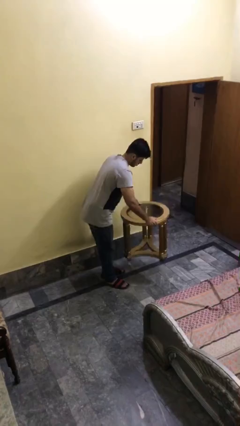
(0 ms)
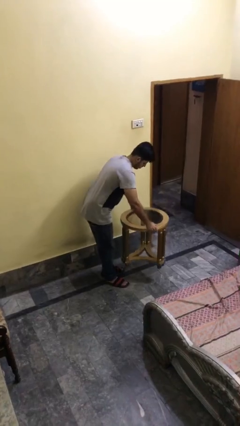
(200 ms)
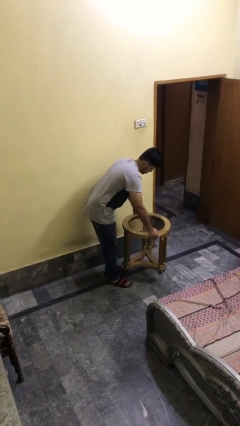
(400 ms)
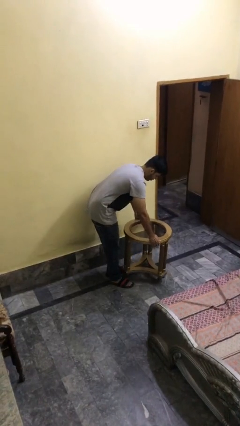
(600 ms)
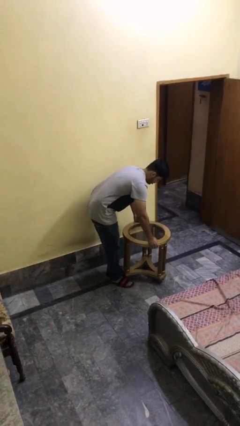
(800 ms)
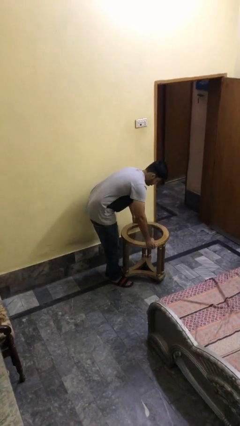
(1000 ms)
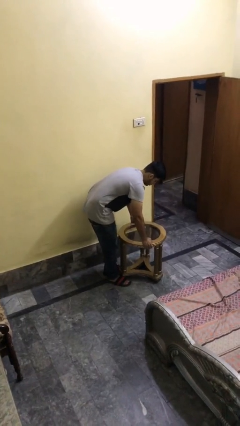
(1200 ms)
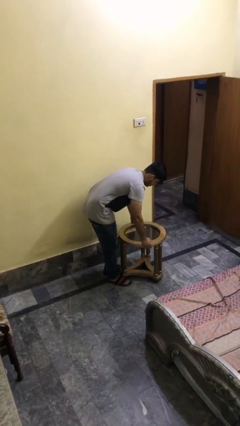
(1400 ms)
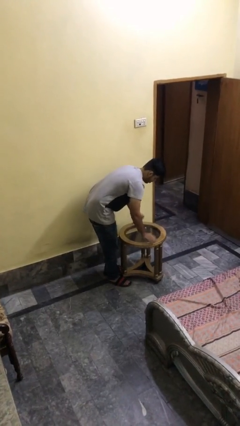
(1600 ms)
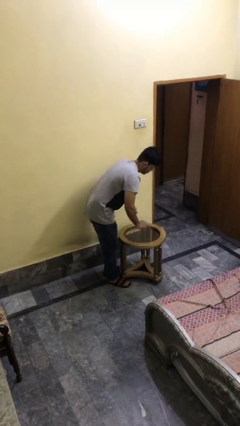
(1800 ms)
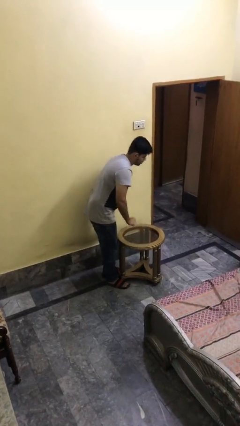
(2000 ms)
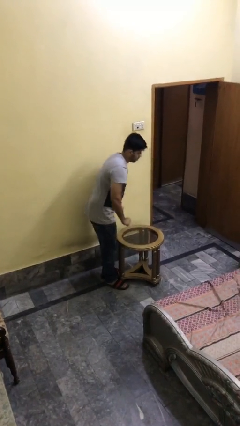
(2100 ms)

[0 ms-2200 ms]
person puts down object on floor

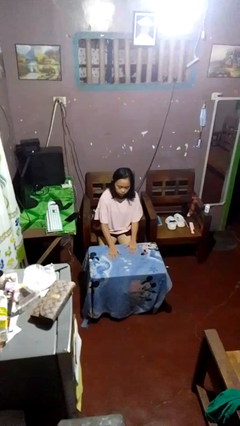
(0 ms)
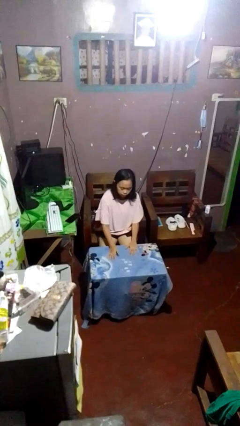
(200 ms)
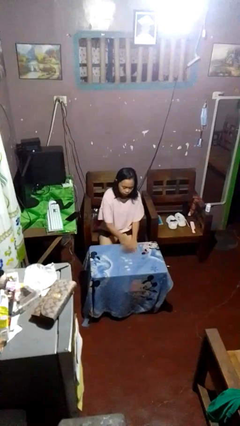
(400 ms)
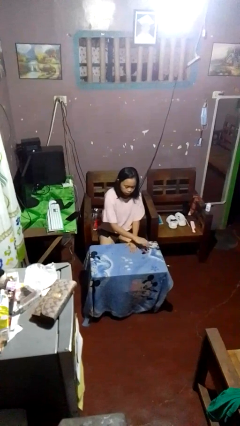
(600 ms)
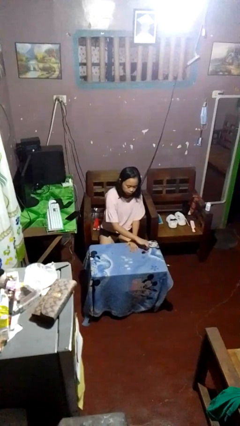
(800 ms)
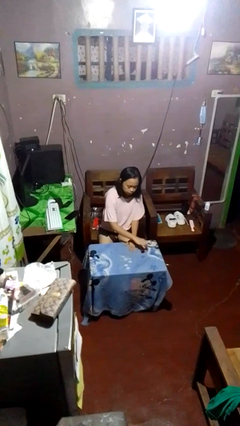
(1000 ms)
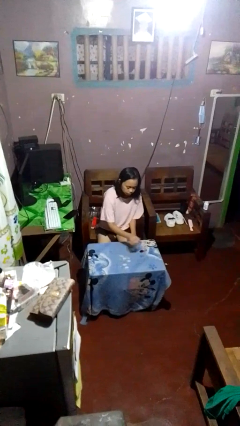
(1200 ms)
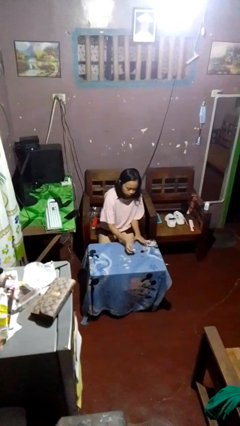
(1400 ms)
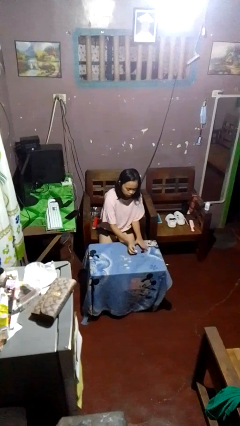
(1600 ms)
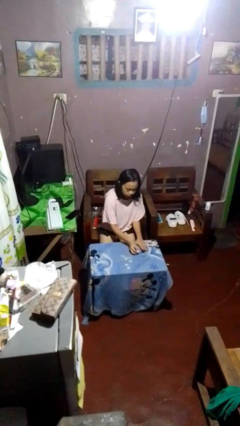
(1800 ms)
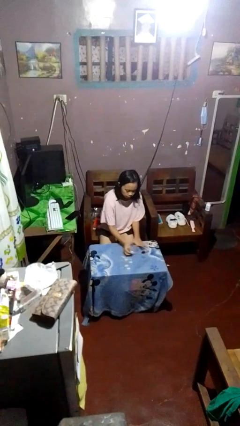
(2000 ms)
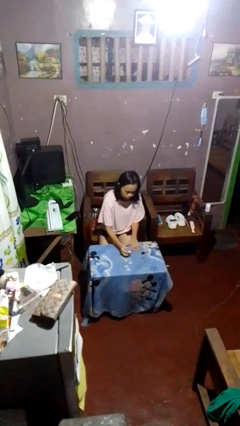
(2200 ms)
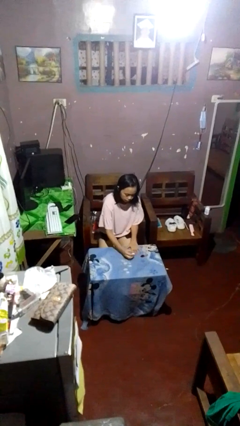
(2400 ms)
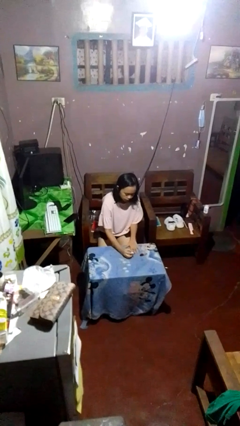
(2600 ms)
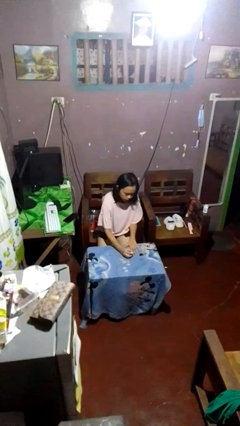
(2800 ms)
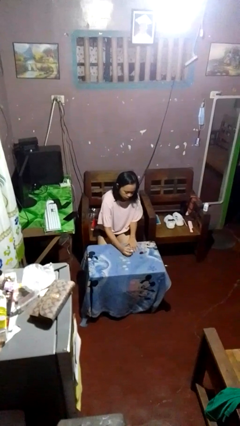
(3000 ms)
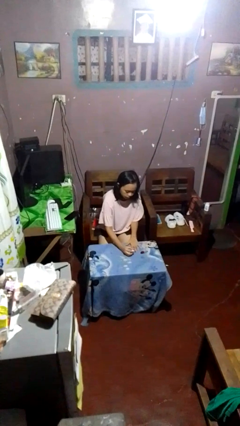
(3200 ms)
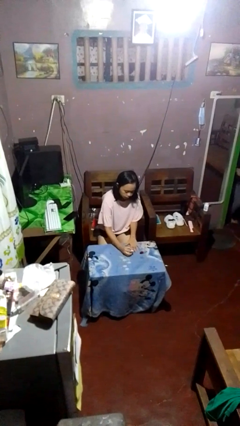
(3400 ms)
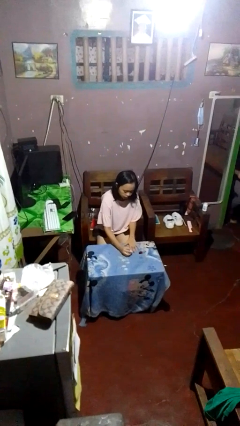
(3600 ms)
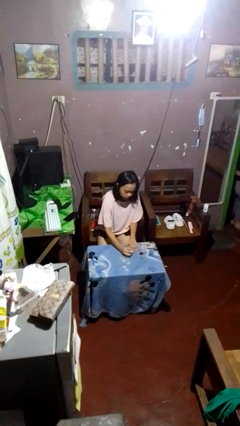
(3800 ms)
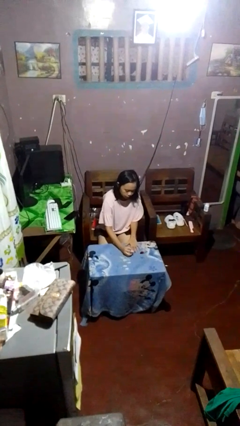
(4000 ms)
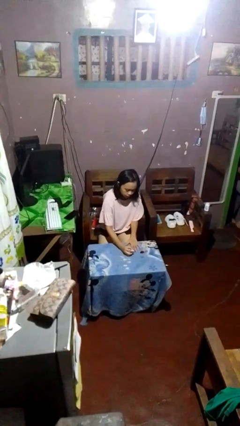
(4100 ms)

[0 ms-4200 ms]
person paints fingernails

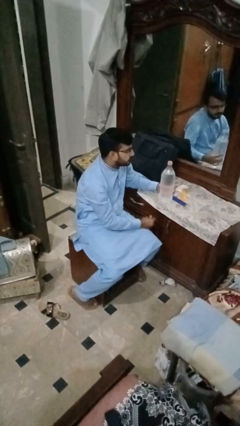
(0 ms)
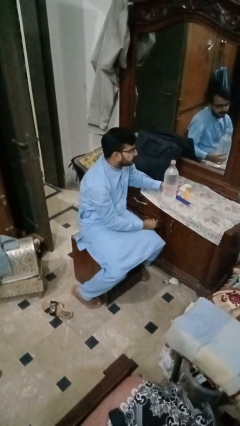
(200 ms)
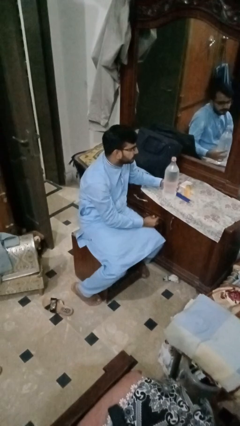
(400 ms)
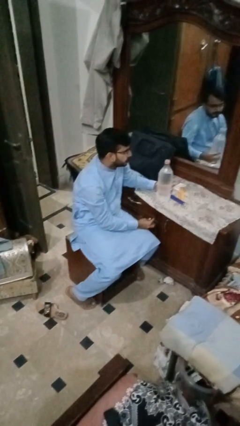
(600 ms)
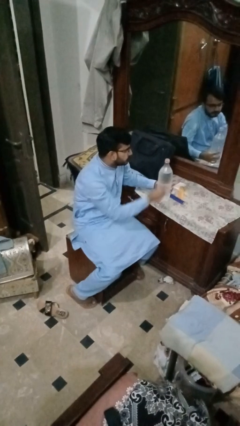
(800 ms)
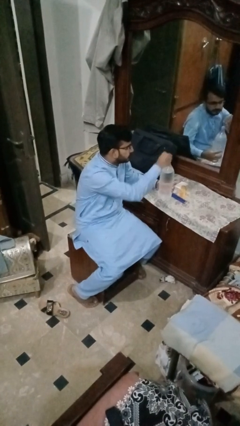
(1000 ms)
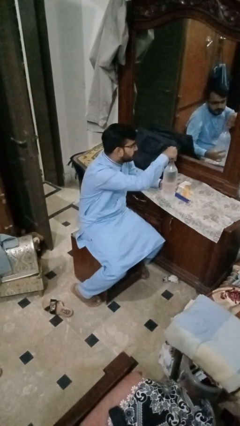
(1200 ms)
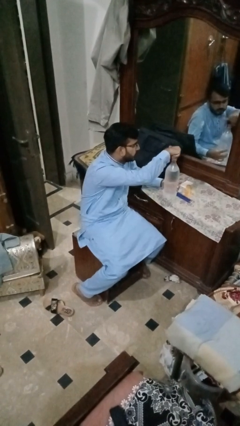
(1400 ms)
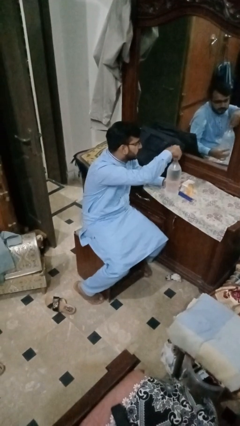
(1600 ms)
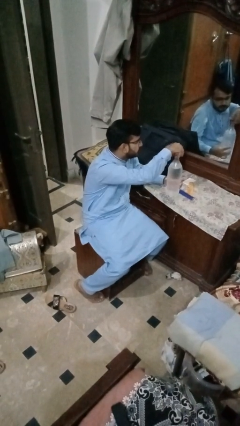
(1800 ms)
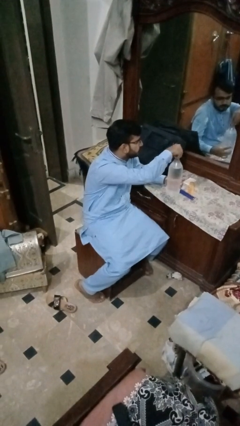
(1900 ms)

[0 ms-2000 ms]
person screws lid to bottle

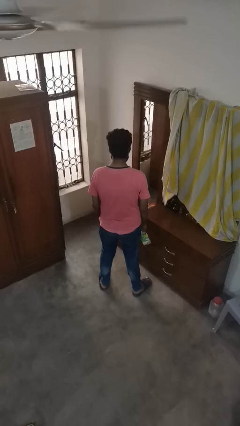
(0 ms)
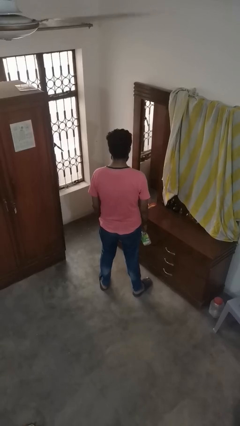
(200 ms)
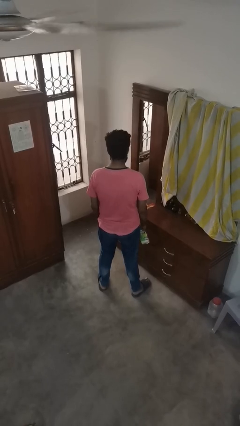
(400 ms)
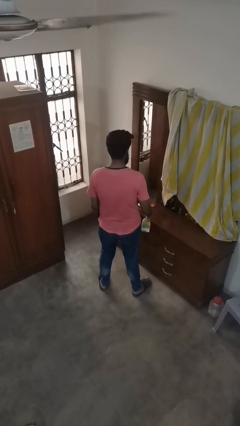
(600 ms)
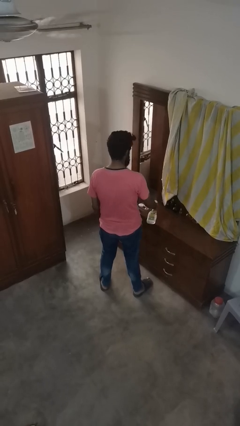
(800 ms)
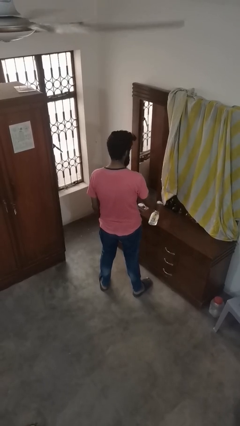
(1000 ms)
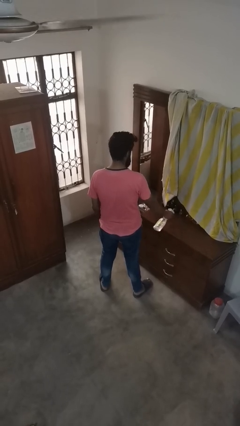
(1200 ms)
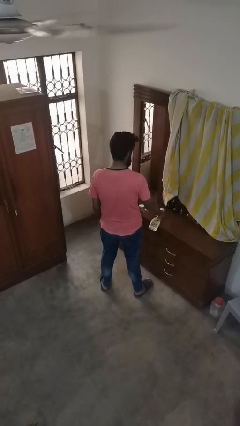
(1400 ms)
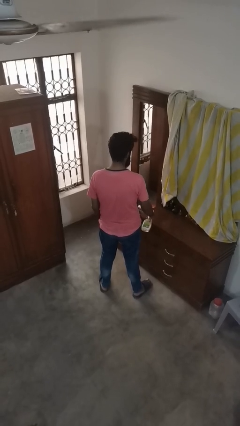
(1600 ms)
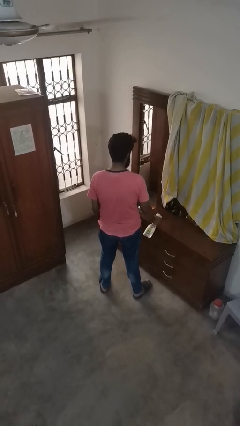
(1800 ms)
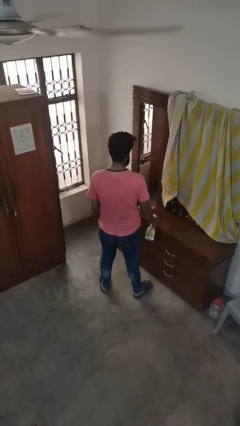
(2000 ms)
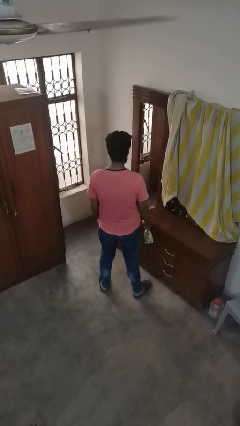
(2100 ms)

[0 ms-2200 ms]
person sprays from bottle

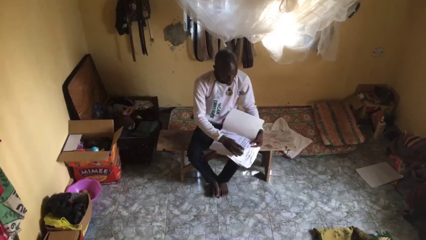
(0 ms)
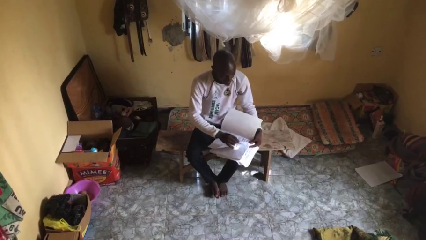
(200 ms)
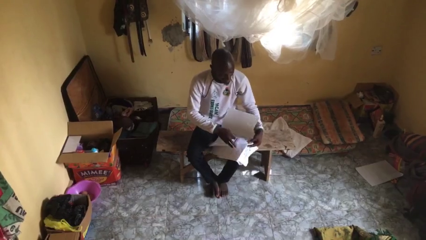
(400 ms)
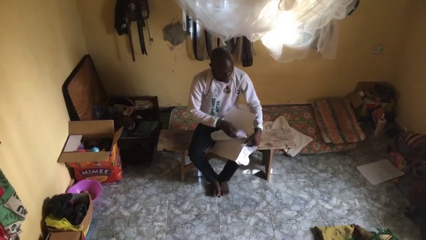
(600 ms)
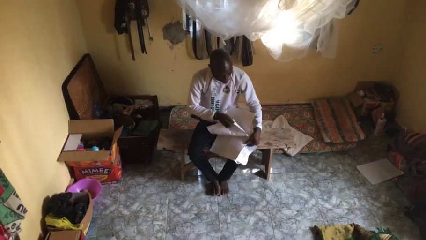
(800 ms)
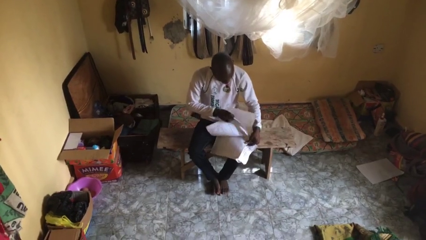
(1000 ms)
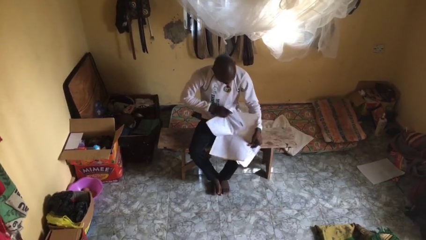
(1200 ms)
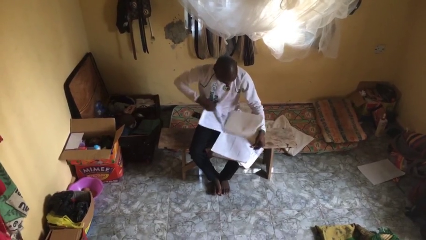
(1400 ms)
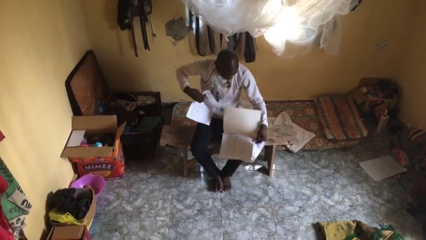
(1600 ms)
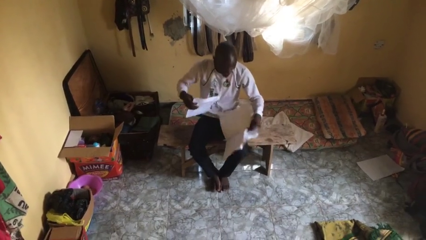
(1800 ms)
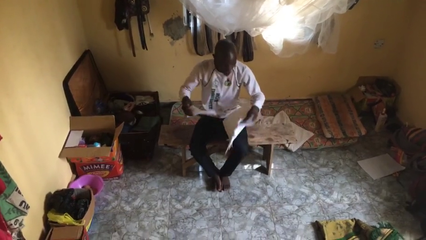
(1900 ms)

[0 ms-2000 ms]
person tears paper

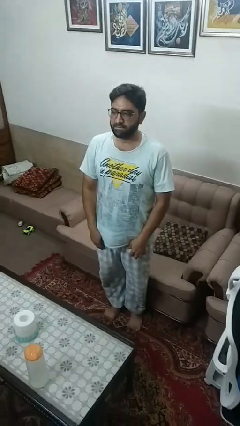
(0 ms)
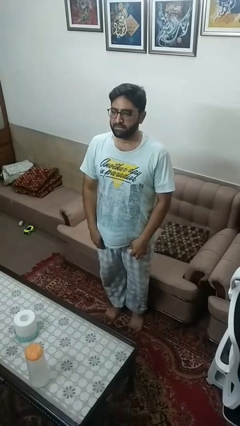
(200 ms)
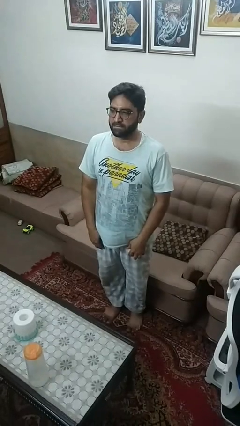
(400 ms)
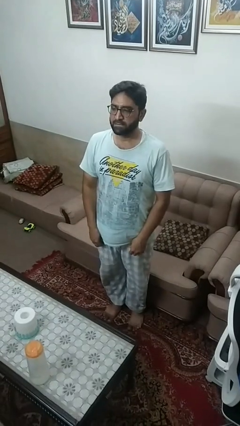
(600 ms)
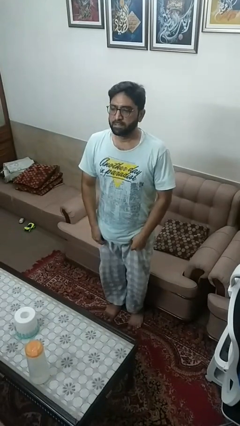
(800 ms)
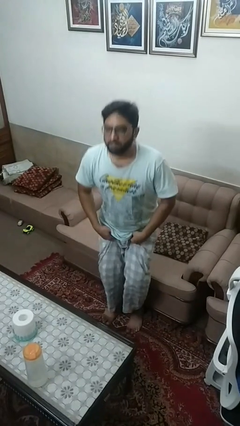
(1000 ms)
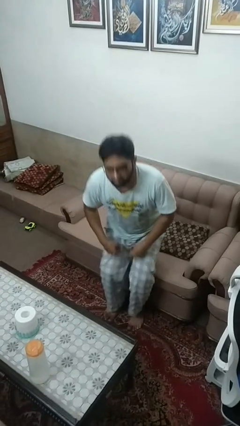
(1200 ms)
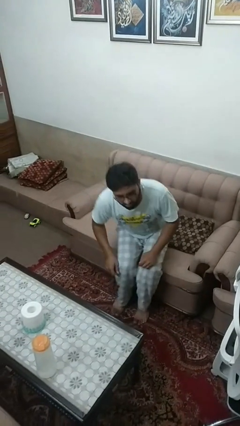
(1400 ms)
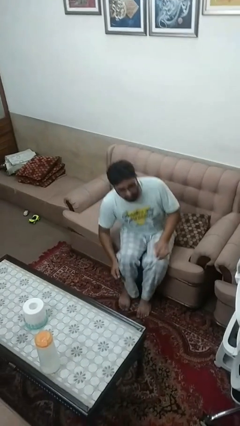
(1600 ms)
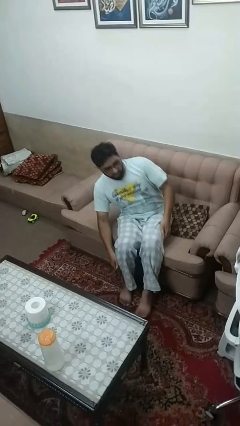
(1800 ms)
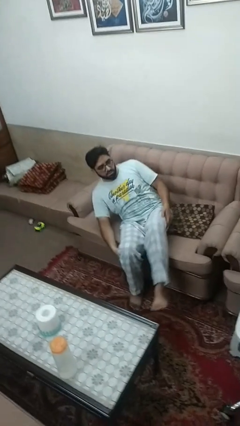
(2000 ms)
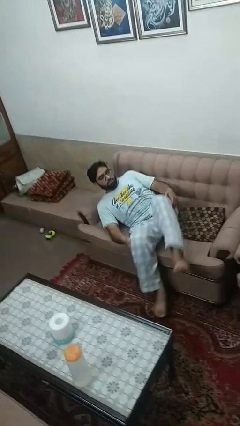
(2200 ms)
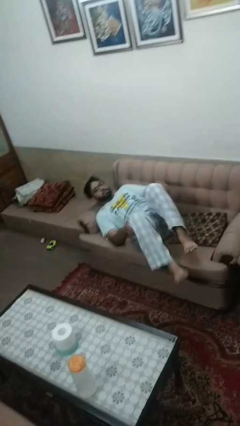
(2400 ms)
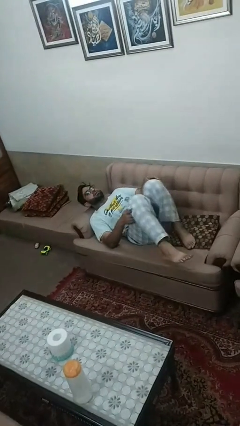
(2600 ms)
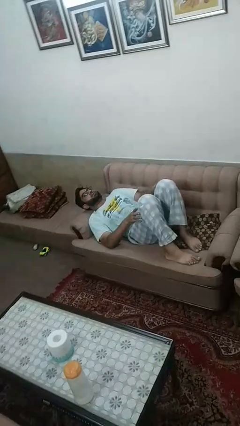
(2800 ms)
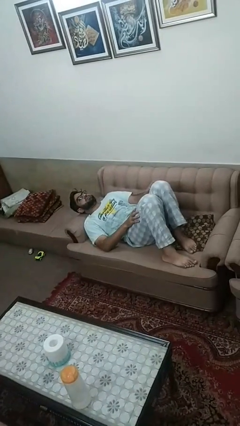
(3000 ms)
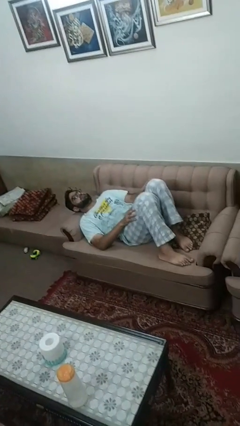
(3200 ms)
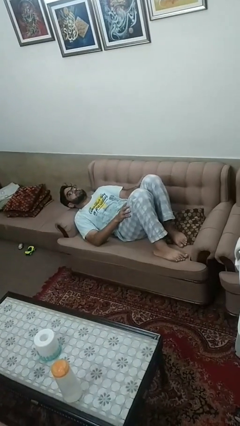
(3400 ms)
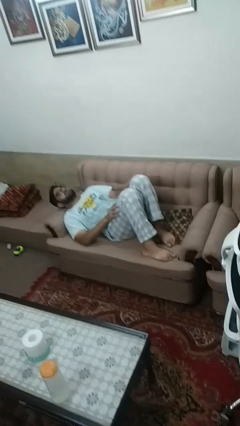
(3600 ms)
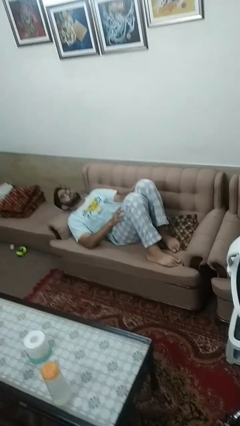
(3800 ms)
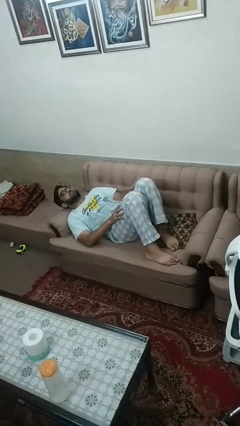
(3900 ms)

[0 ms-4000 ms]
person lies down on couch

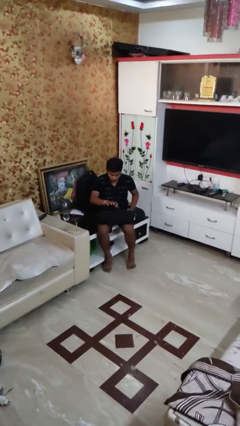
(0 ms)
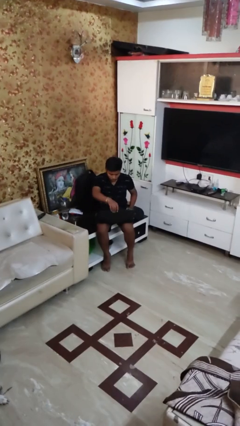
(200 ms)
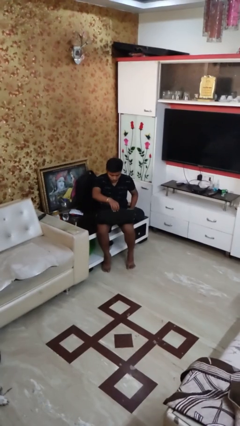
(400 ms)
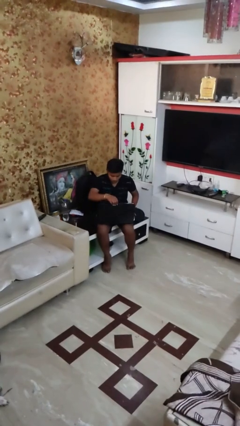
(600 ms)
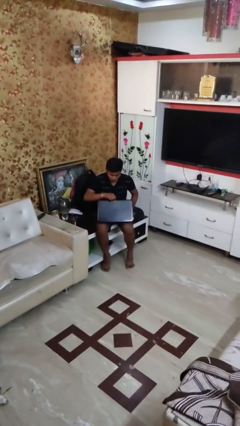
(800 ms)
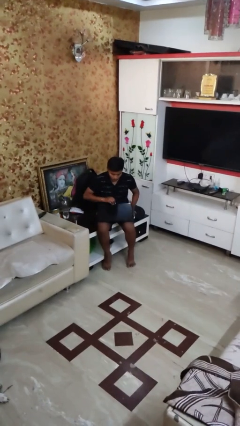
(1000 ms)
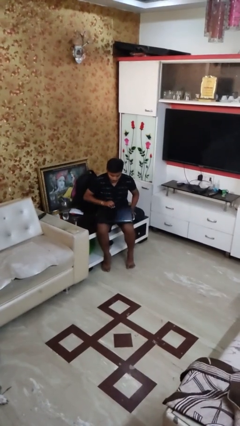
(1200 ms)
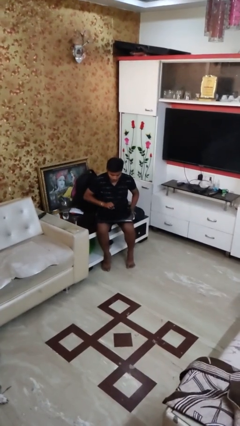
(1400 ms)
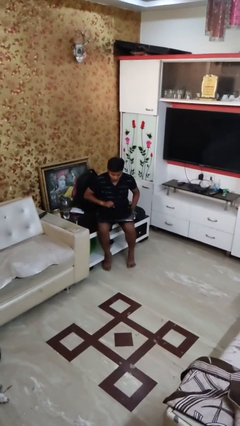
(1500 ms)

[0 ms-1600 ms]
person closes laptop
